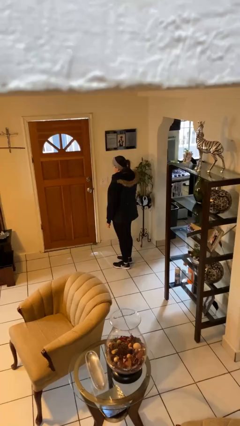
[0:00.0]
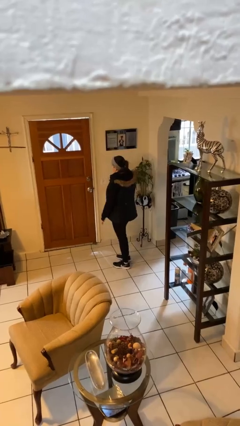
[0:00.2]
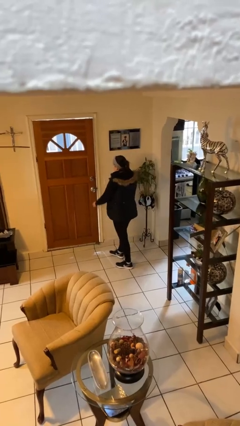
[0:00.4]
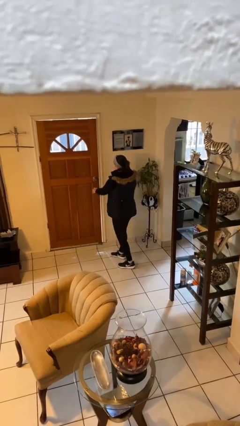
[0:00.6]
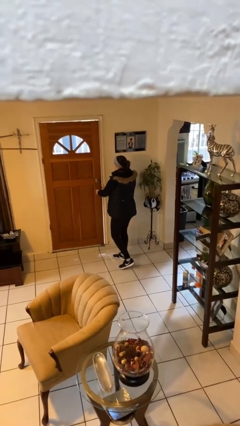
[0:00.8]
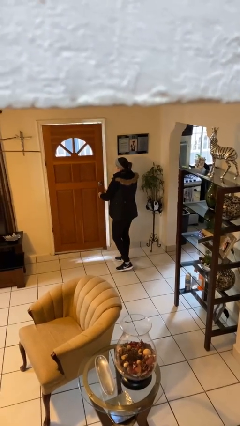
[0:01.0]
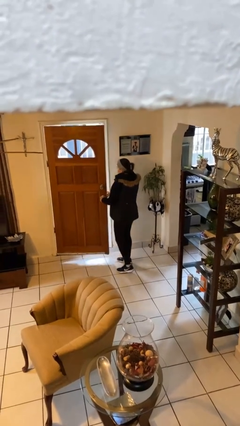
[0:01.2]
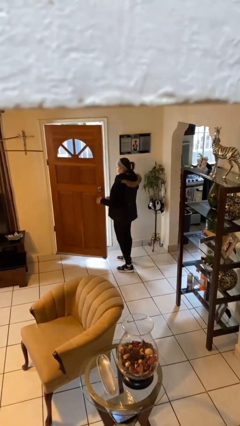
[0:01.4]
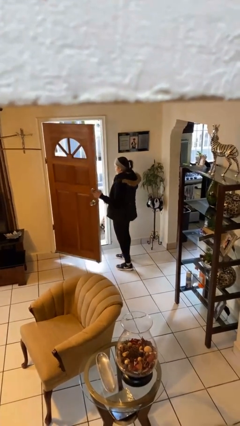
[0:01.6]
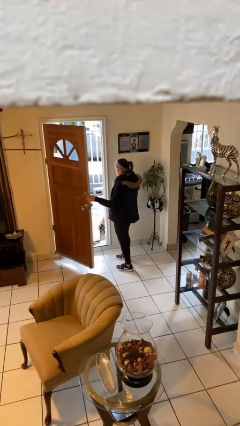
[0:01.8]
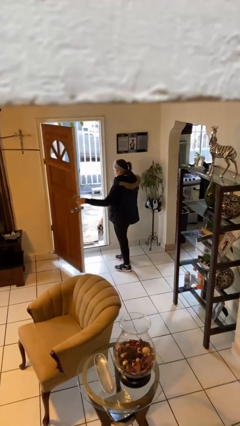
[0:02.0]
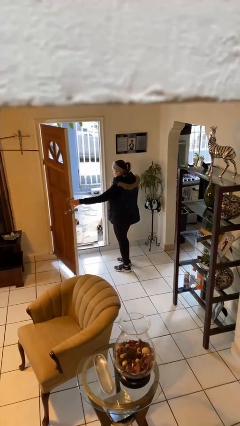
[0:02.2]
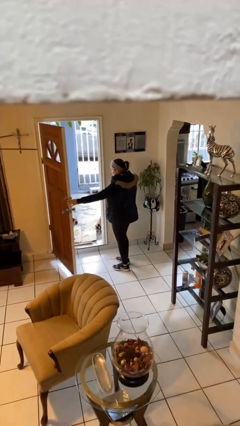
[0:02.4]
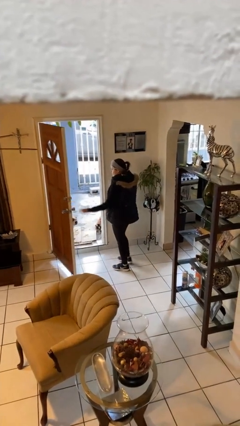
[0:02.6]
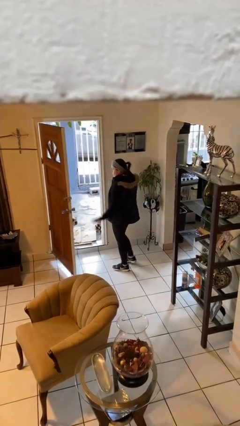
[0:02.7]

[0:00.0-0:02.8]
person opens facility door

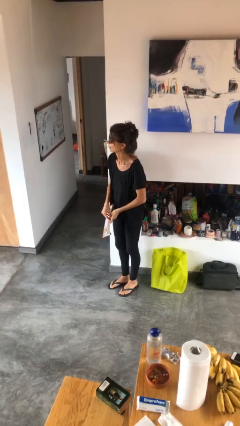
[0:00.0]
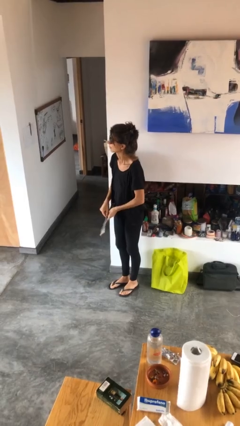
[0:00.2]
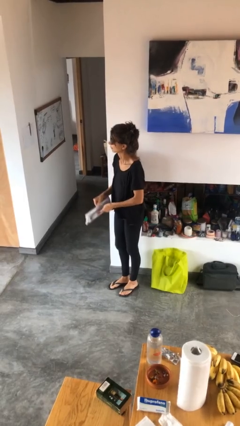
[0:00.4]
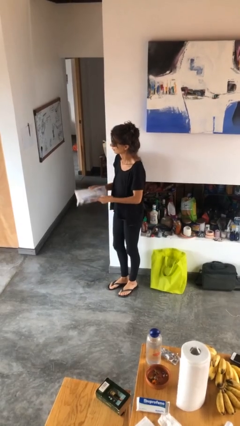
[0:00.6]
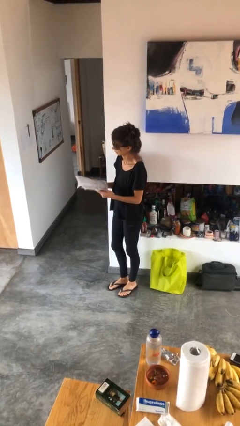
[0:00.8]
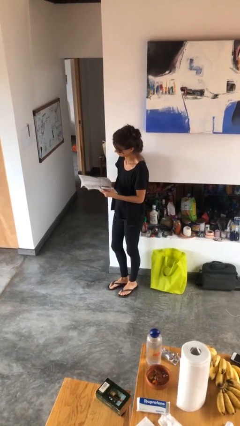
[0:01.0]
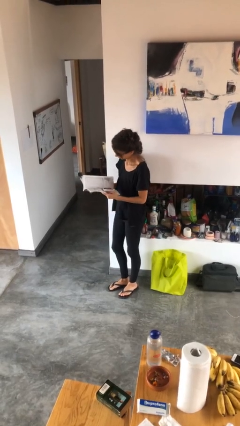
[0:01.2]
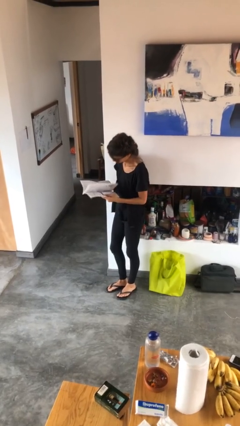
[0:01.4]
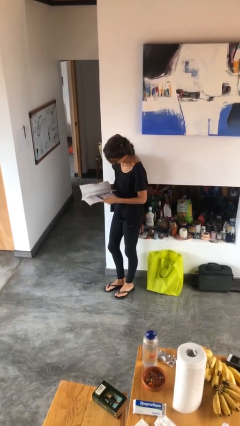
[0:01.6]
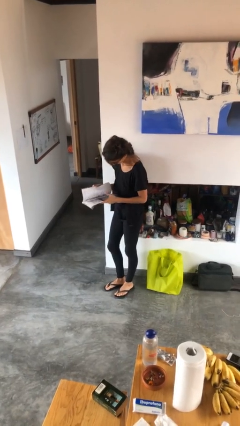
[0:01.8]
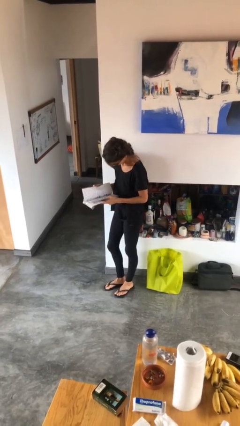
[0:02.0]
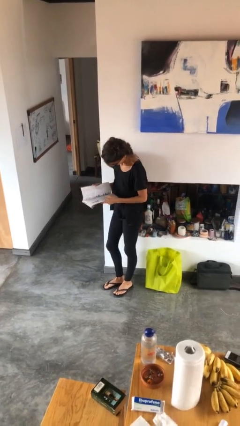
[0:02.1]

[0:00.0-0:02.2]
person reads magazine

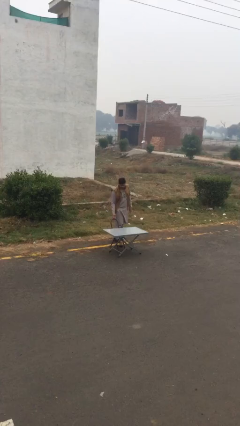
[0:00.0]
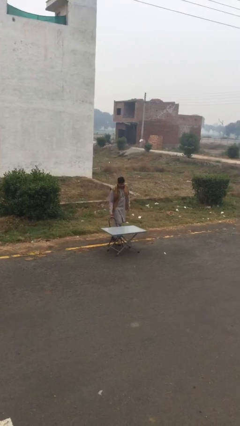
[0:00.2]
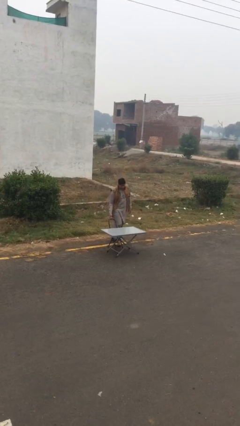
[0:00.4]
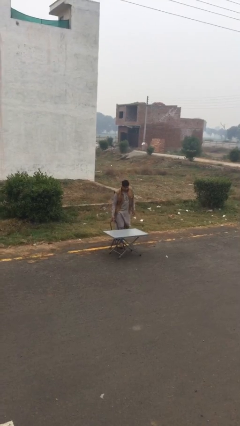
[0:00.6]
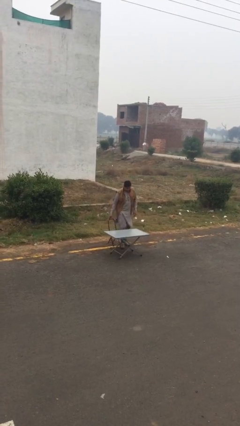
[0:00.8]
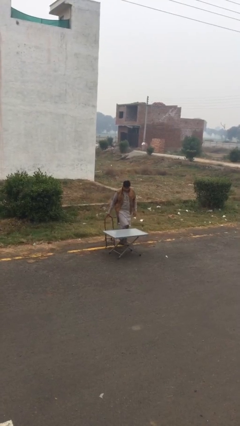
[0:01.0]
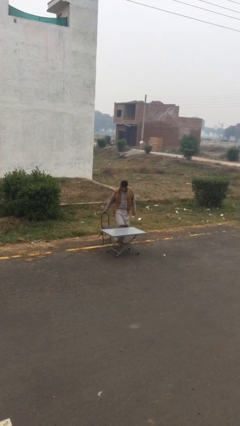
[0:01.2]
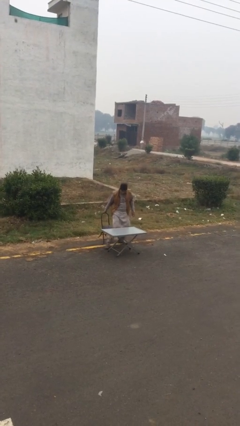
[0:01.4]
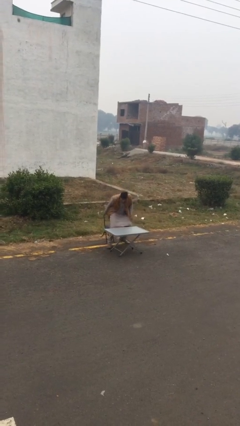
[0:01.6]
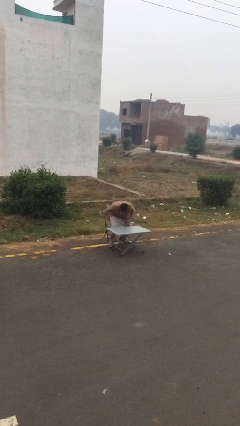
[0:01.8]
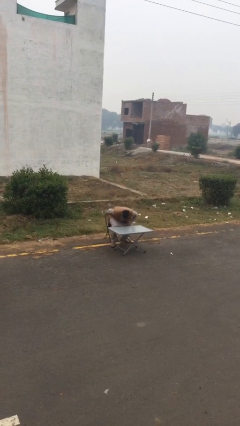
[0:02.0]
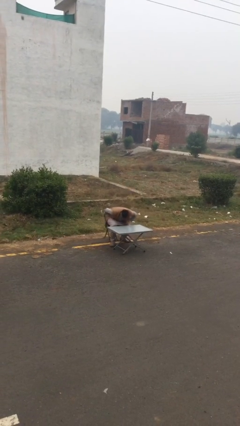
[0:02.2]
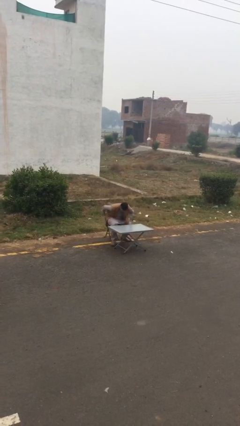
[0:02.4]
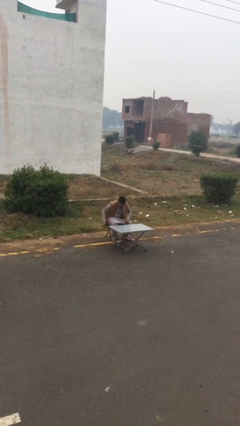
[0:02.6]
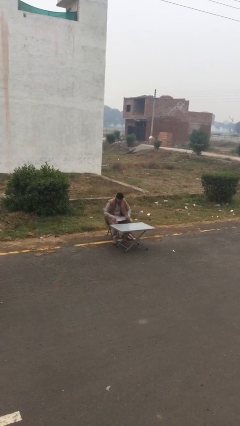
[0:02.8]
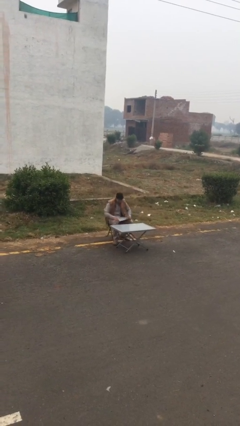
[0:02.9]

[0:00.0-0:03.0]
person sits down

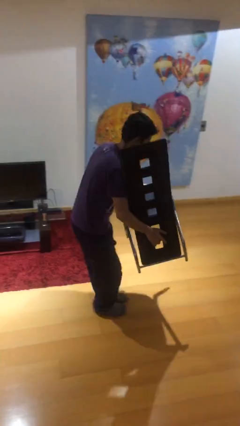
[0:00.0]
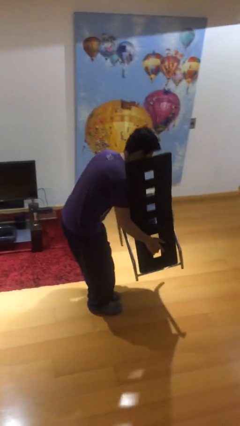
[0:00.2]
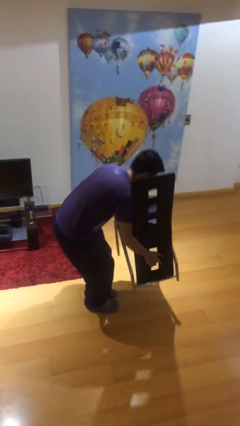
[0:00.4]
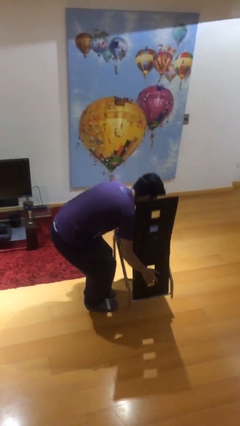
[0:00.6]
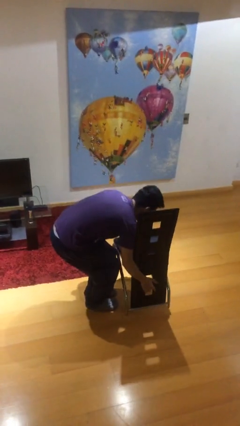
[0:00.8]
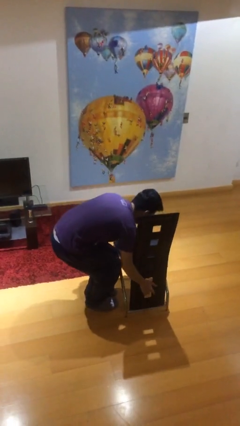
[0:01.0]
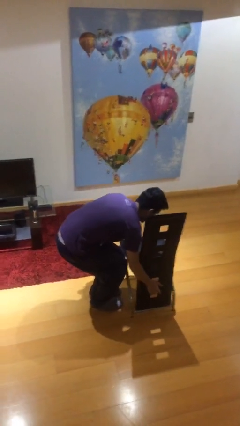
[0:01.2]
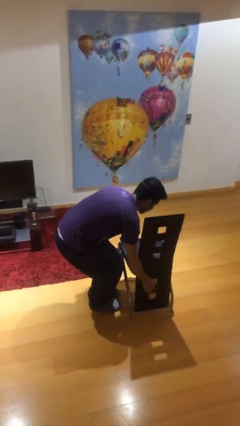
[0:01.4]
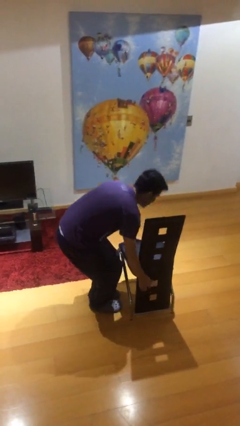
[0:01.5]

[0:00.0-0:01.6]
person puts down object on floor

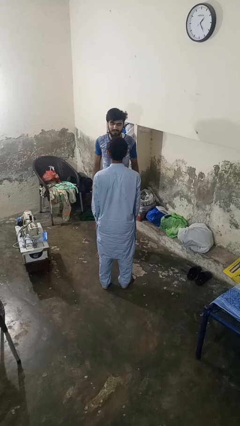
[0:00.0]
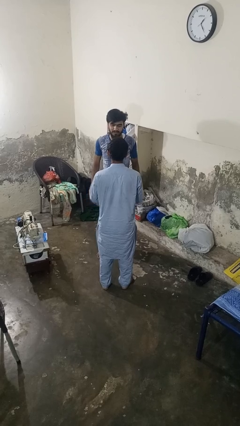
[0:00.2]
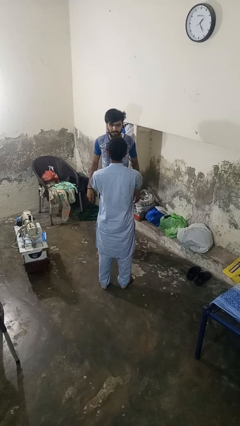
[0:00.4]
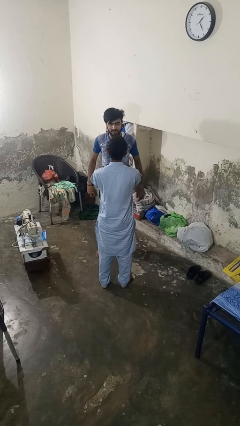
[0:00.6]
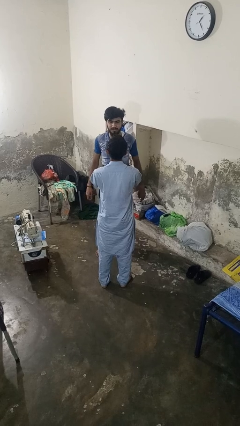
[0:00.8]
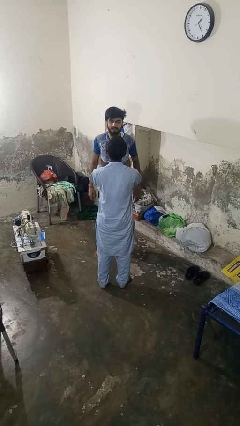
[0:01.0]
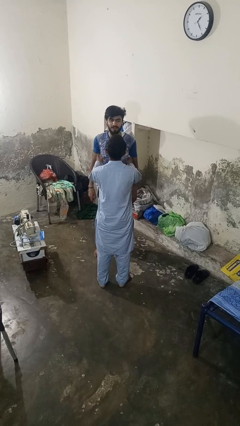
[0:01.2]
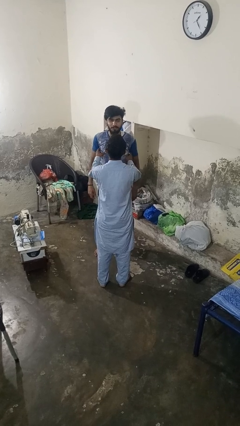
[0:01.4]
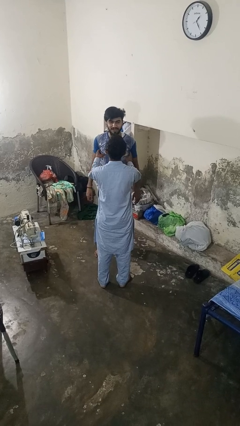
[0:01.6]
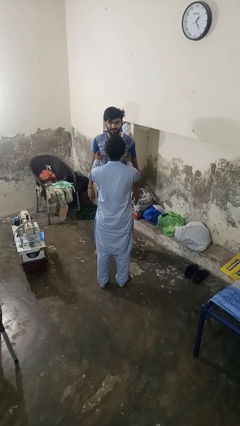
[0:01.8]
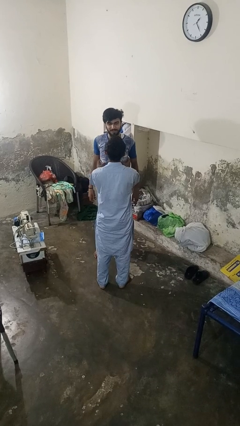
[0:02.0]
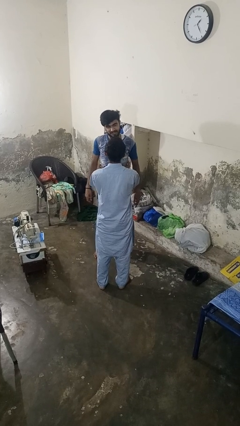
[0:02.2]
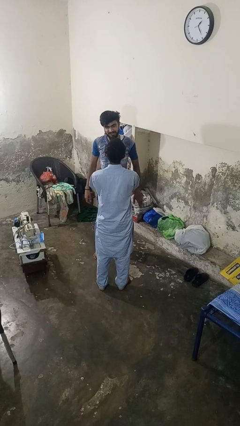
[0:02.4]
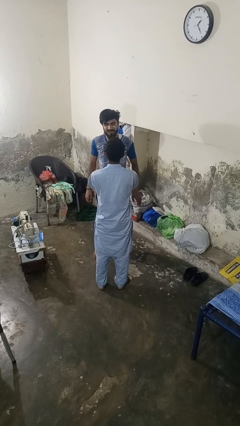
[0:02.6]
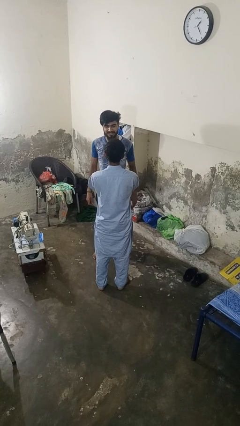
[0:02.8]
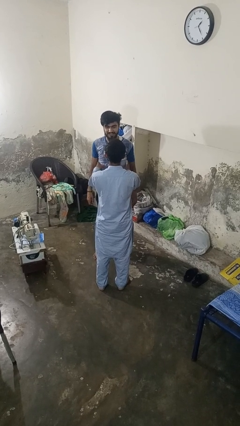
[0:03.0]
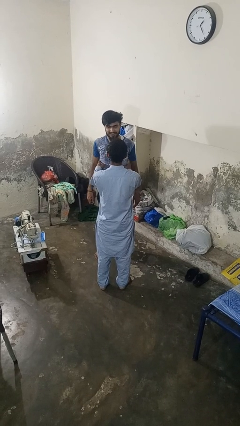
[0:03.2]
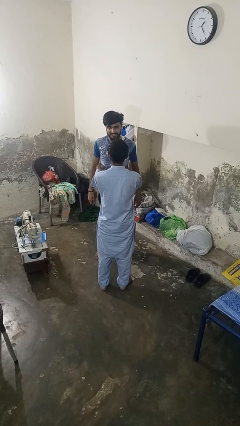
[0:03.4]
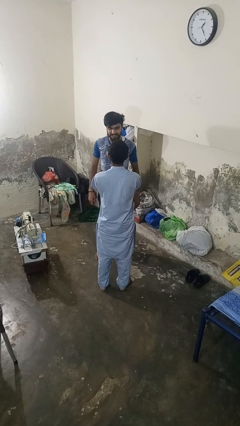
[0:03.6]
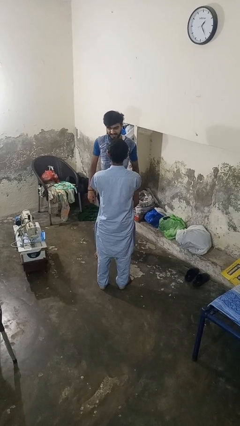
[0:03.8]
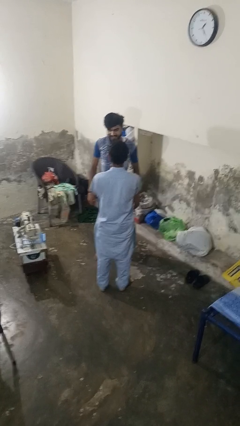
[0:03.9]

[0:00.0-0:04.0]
person tickles person

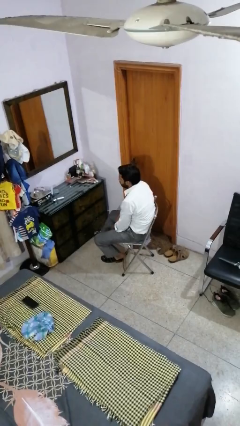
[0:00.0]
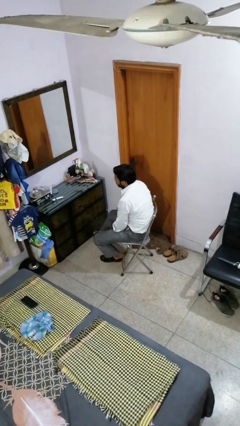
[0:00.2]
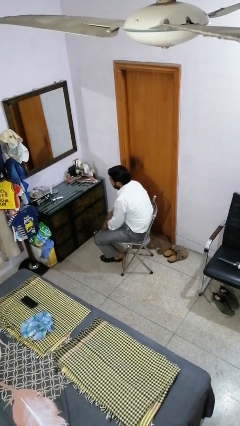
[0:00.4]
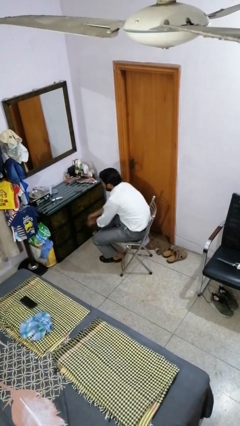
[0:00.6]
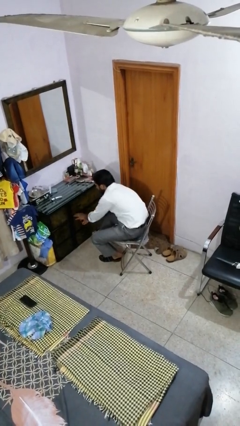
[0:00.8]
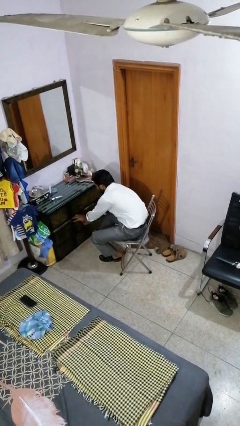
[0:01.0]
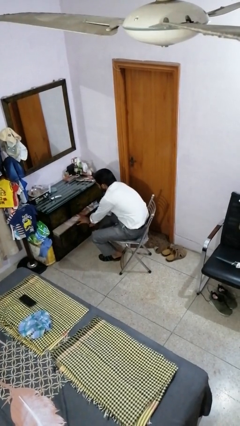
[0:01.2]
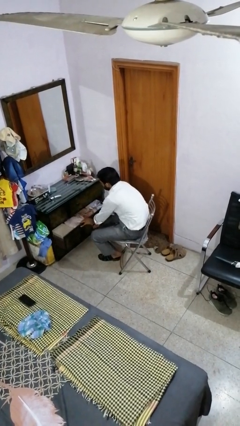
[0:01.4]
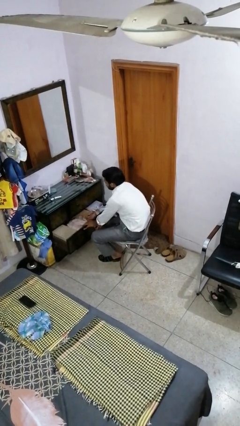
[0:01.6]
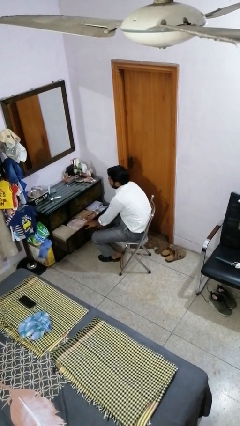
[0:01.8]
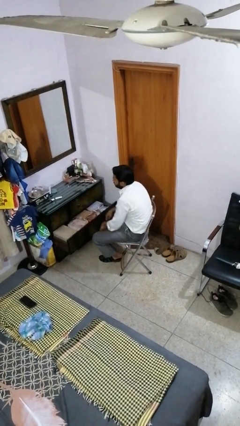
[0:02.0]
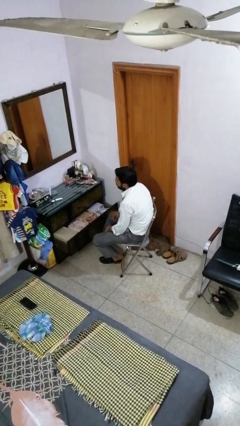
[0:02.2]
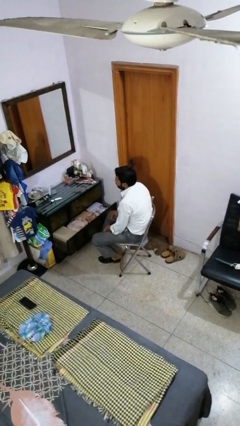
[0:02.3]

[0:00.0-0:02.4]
person opens dresser drawer

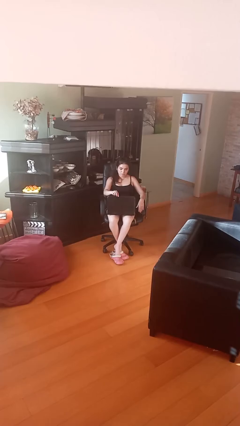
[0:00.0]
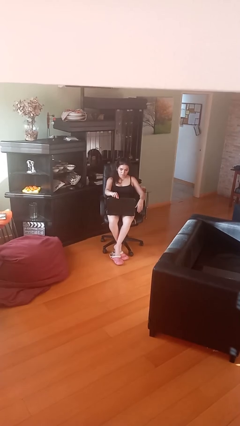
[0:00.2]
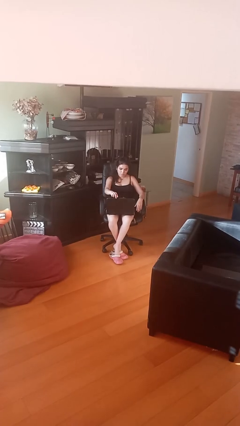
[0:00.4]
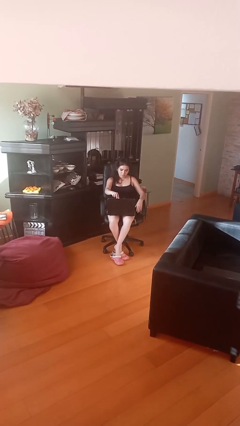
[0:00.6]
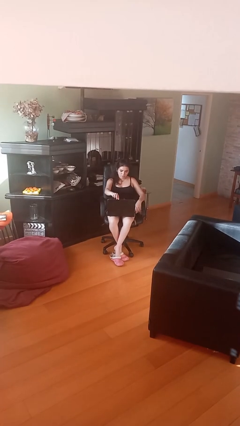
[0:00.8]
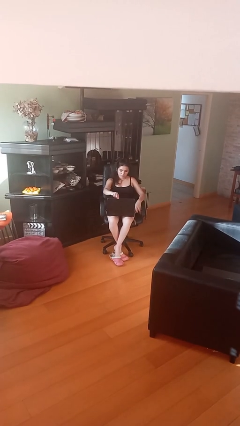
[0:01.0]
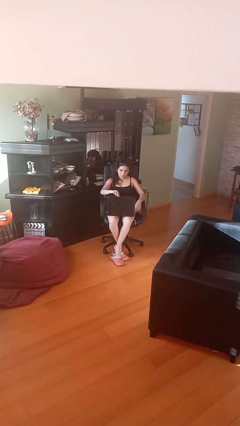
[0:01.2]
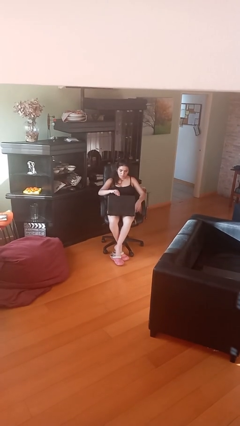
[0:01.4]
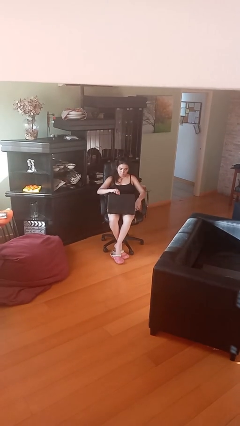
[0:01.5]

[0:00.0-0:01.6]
person interacts with laptop
